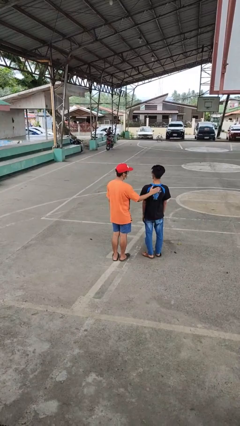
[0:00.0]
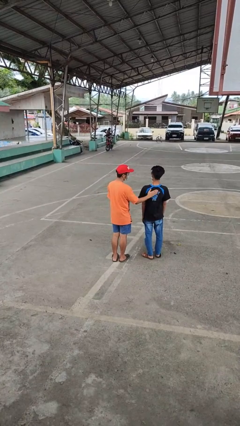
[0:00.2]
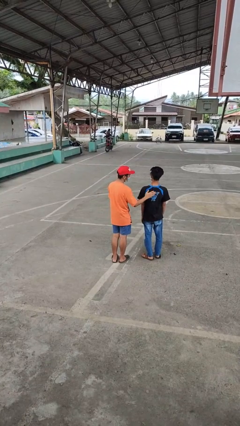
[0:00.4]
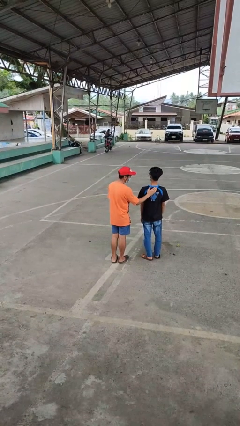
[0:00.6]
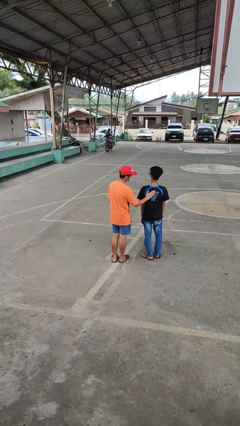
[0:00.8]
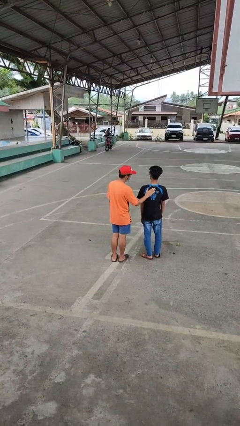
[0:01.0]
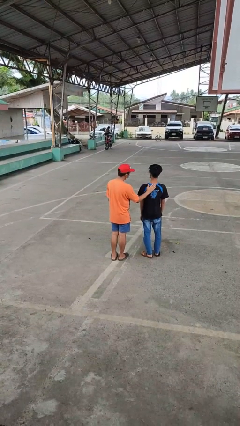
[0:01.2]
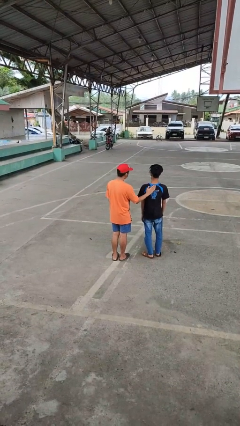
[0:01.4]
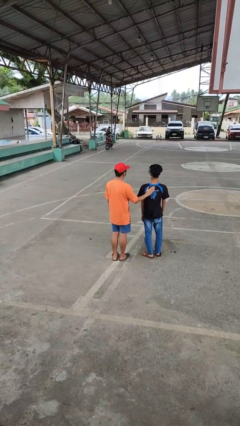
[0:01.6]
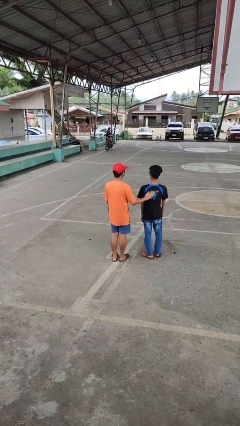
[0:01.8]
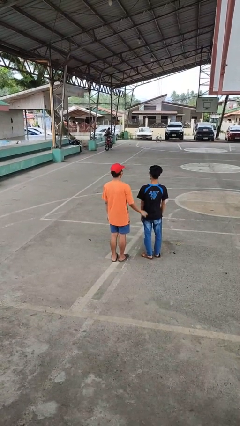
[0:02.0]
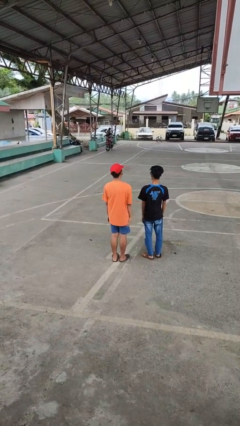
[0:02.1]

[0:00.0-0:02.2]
person touches back of person

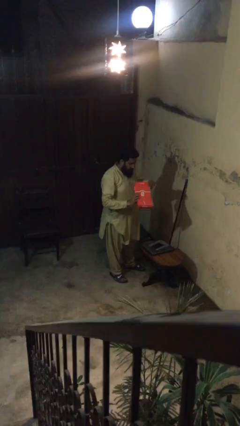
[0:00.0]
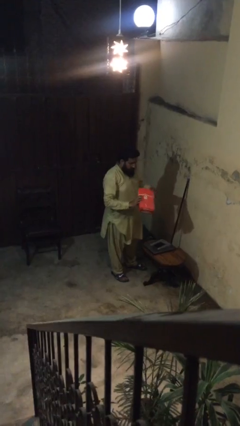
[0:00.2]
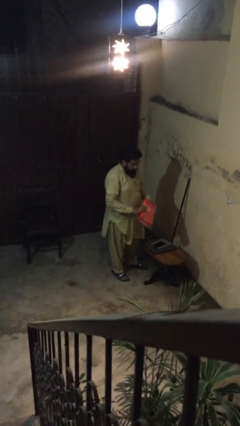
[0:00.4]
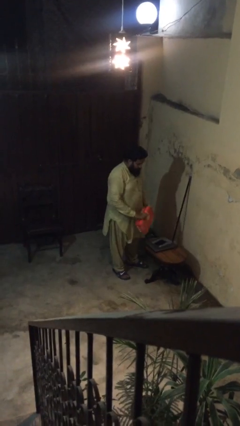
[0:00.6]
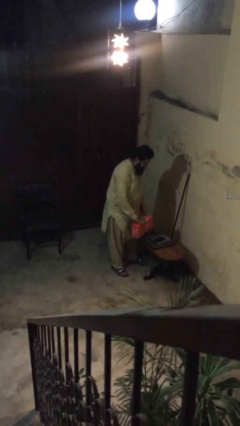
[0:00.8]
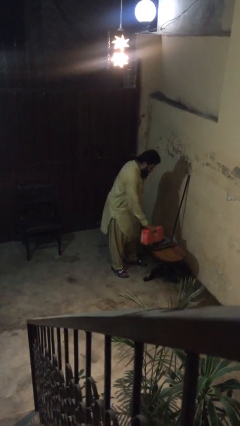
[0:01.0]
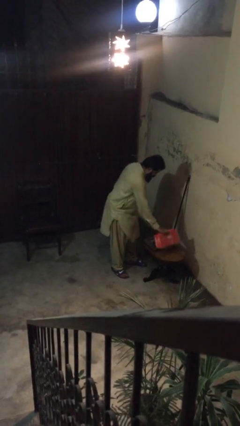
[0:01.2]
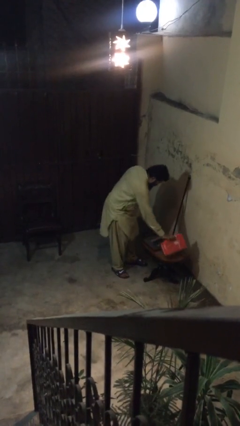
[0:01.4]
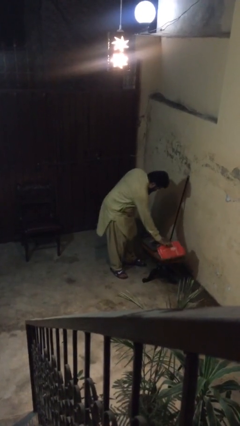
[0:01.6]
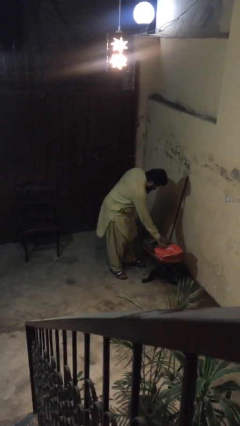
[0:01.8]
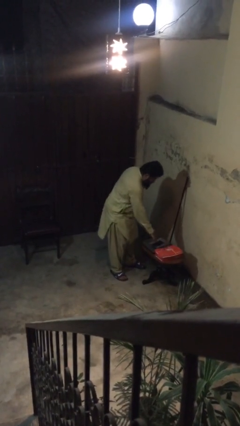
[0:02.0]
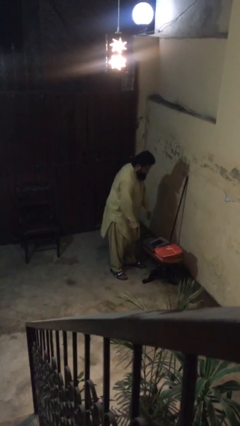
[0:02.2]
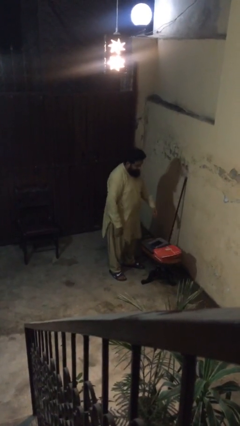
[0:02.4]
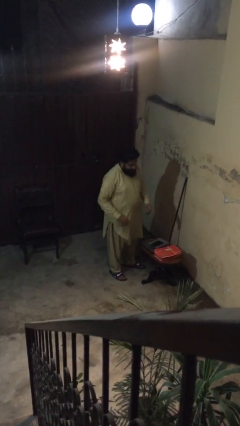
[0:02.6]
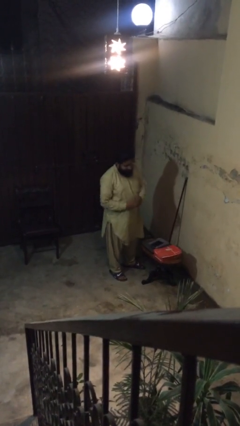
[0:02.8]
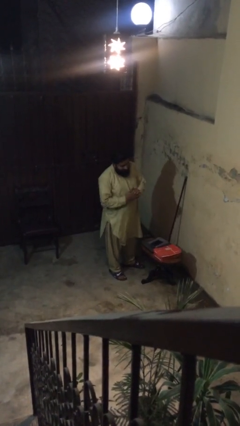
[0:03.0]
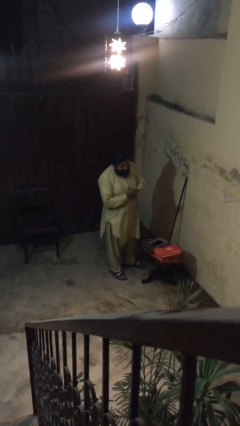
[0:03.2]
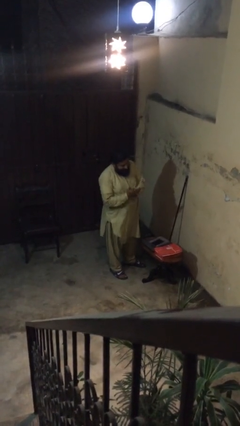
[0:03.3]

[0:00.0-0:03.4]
person puts down object on table

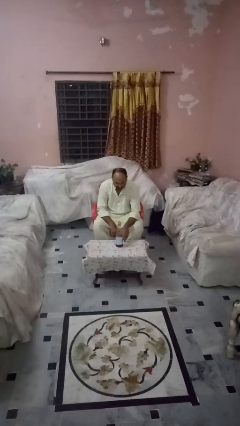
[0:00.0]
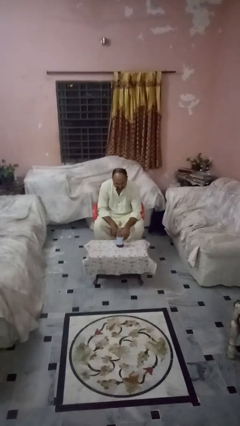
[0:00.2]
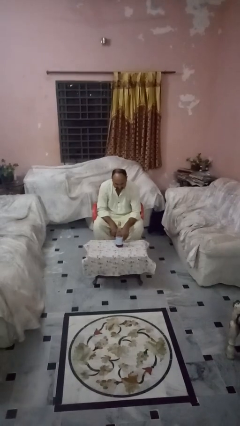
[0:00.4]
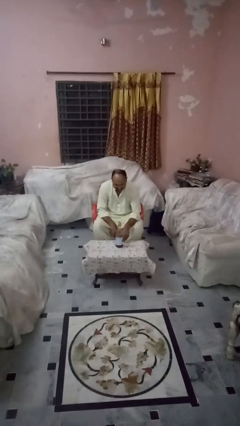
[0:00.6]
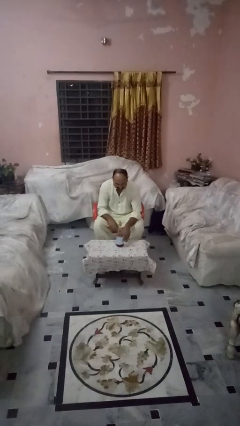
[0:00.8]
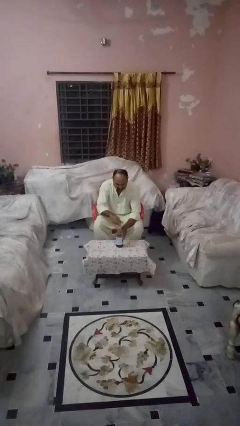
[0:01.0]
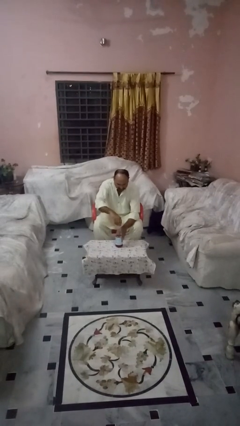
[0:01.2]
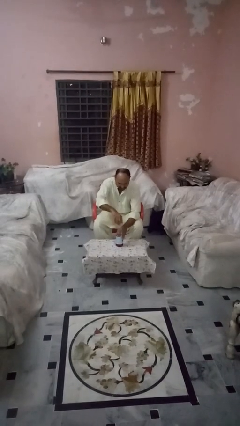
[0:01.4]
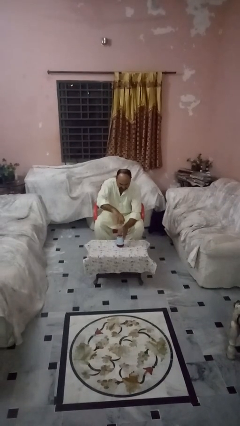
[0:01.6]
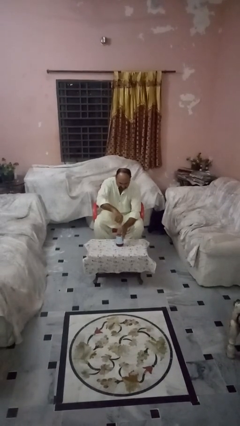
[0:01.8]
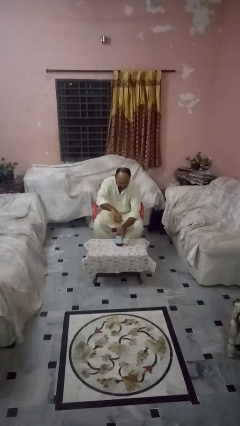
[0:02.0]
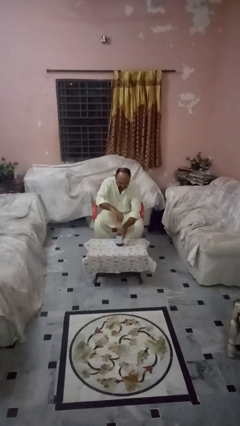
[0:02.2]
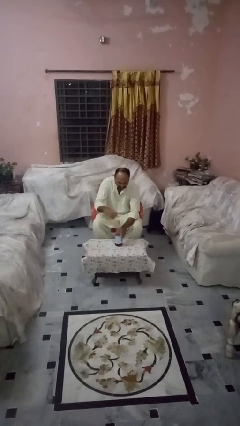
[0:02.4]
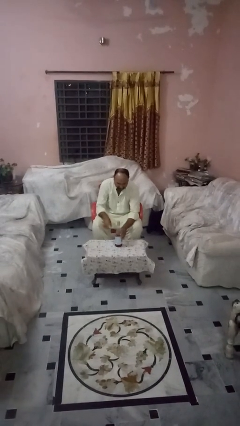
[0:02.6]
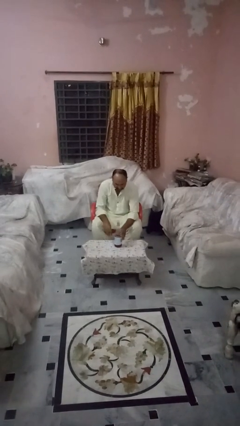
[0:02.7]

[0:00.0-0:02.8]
person unscrews lid from bottle

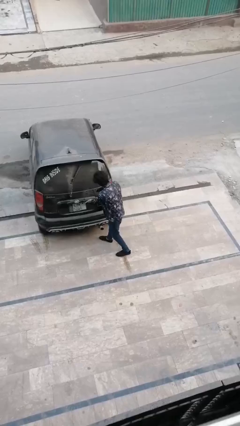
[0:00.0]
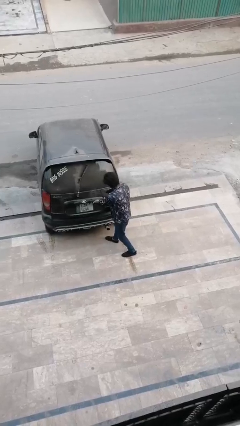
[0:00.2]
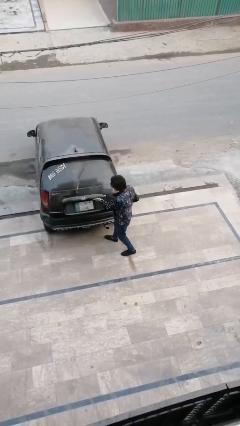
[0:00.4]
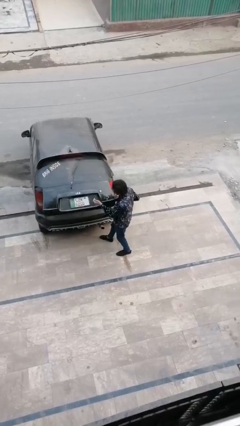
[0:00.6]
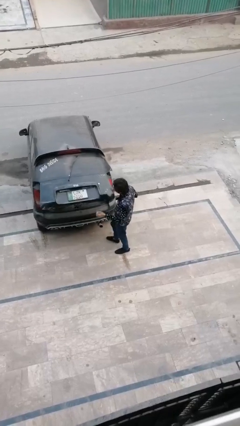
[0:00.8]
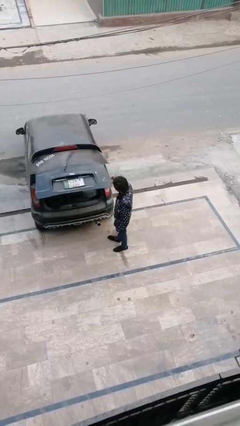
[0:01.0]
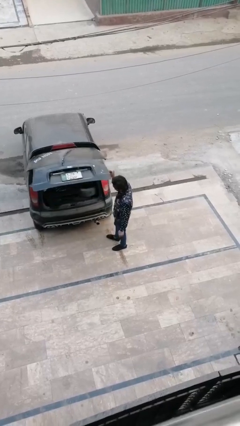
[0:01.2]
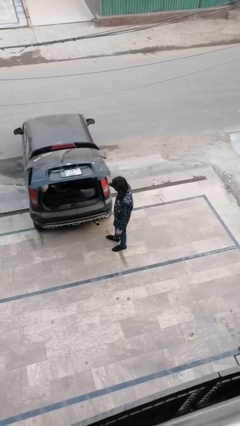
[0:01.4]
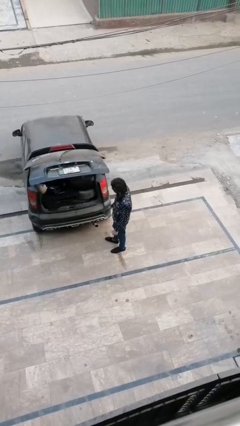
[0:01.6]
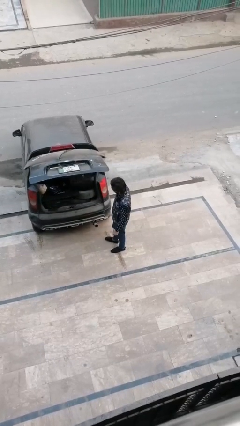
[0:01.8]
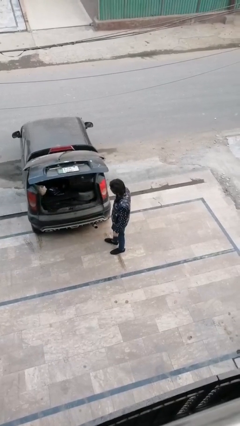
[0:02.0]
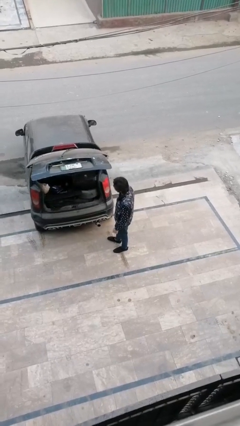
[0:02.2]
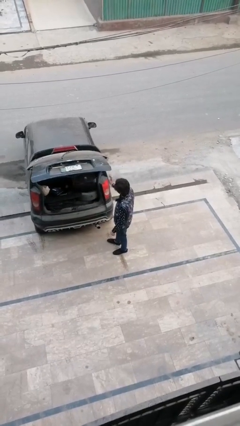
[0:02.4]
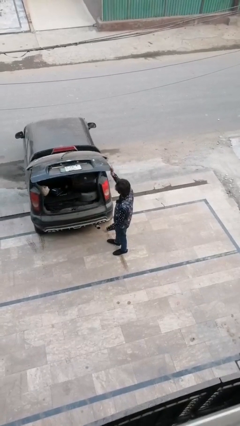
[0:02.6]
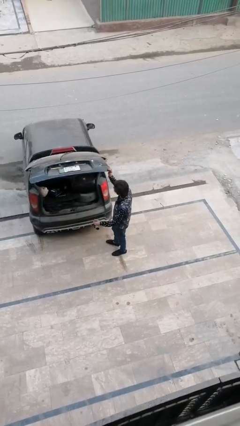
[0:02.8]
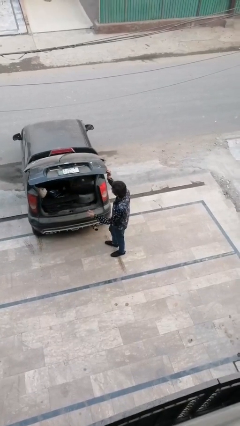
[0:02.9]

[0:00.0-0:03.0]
person opens car trunk

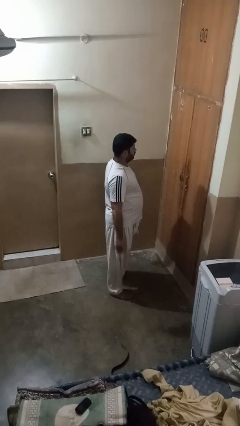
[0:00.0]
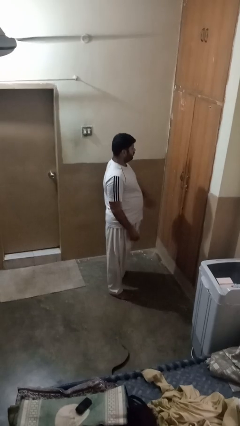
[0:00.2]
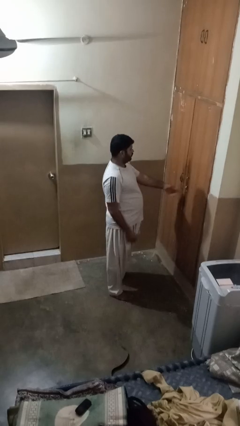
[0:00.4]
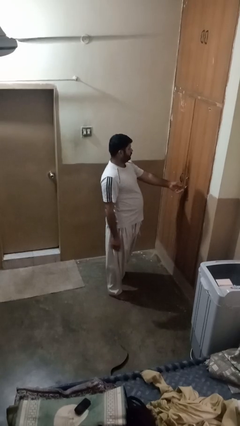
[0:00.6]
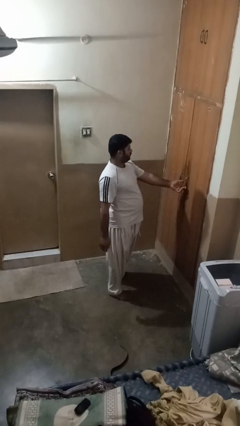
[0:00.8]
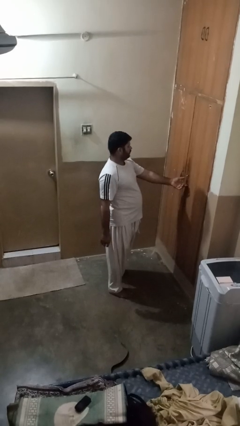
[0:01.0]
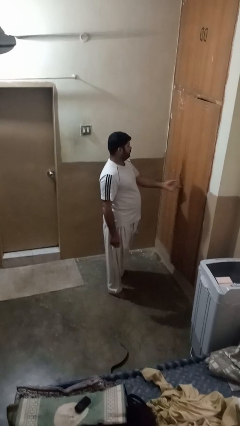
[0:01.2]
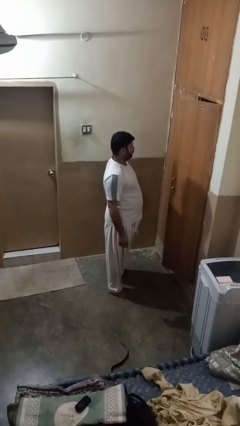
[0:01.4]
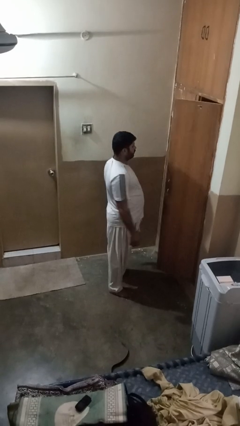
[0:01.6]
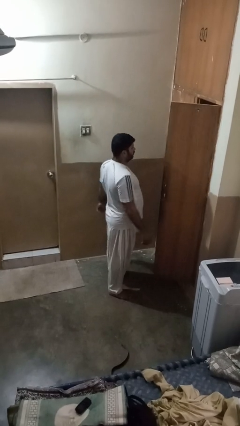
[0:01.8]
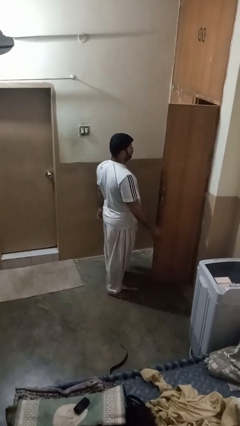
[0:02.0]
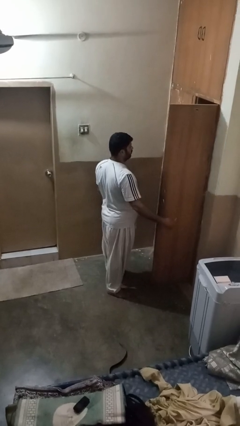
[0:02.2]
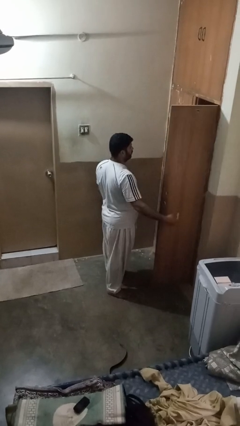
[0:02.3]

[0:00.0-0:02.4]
person opens closet door
